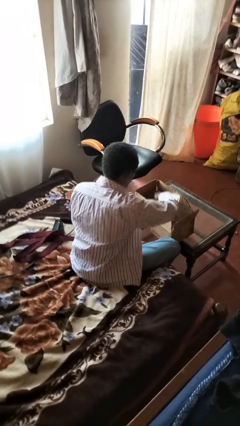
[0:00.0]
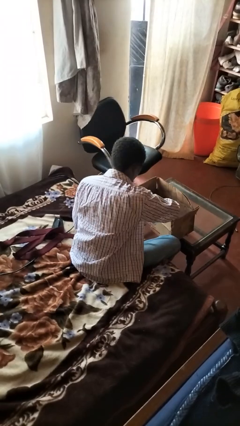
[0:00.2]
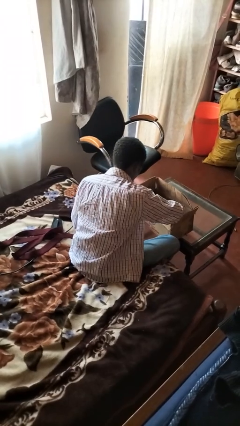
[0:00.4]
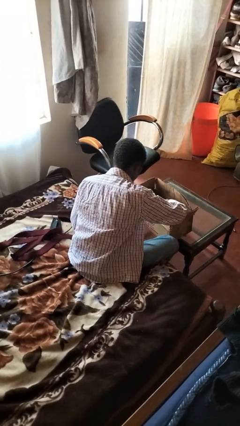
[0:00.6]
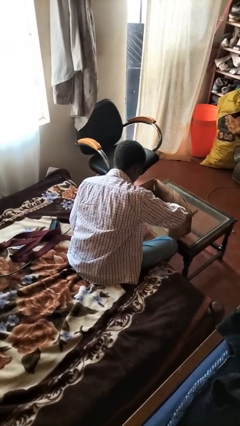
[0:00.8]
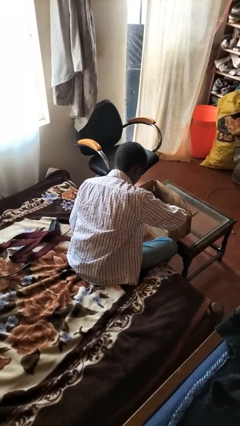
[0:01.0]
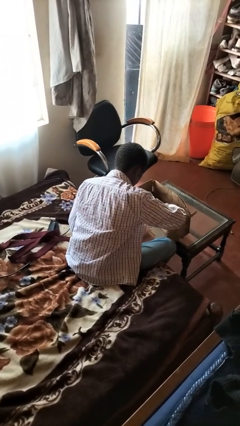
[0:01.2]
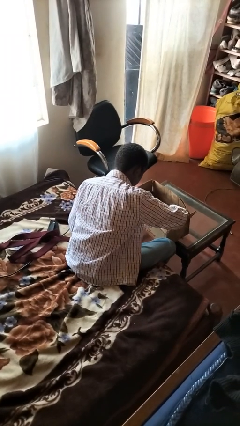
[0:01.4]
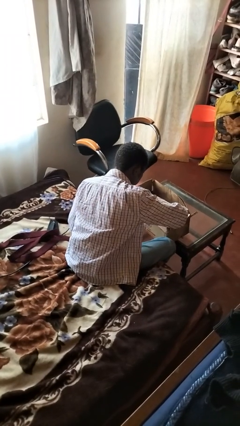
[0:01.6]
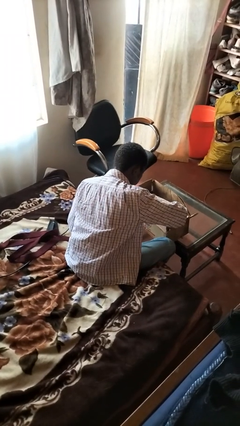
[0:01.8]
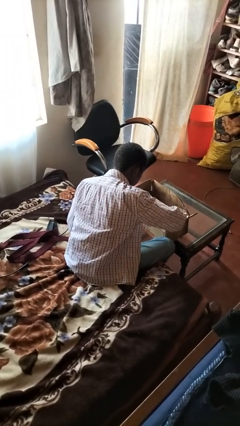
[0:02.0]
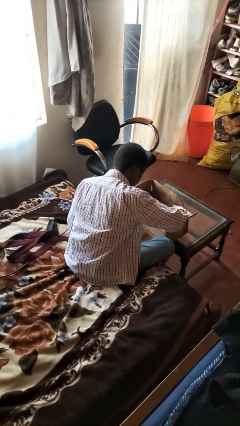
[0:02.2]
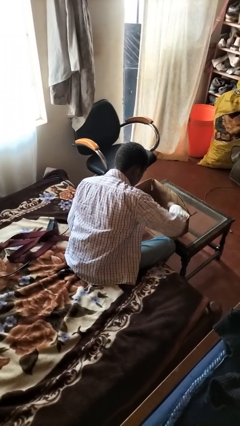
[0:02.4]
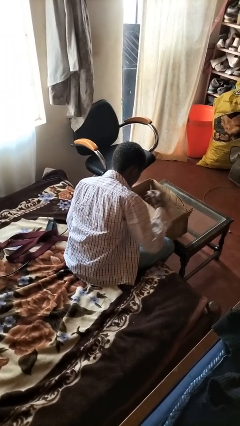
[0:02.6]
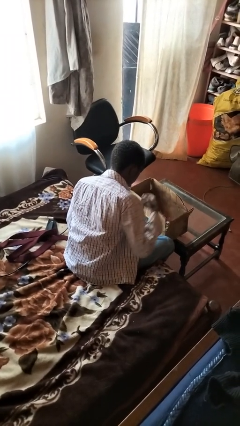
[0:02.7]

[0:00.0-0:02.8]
person searches in box

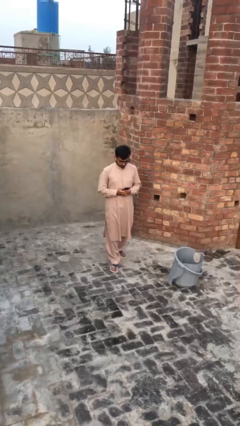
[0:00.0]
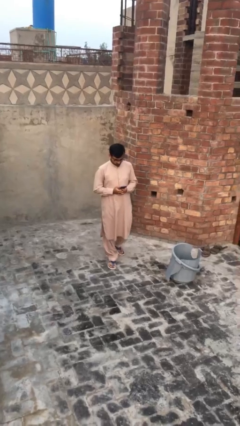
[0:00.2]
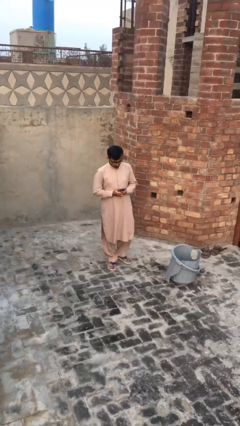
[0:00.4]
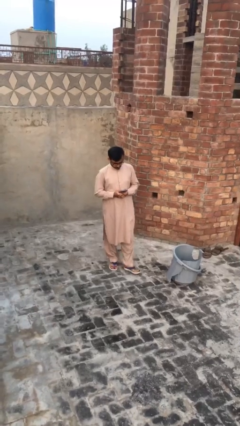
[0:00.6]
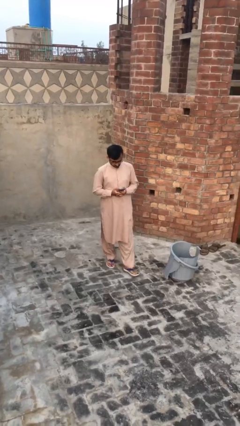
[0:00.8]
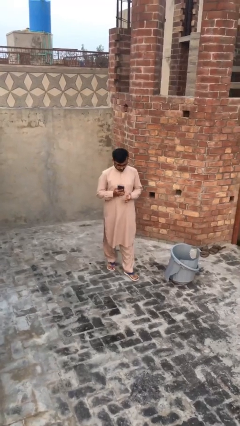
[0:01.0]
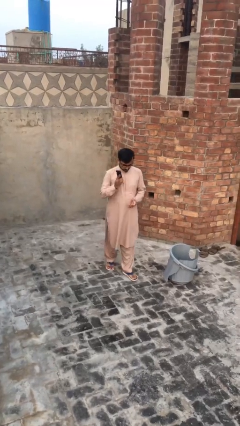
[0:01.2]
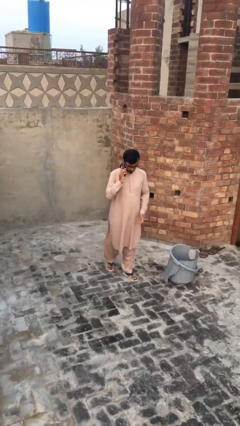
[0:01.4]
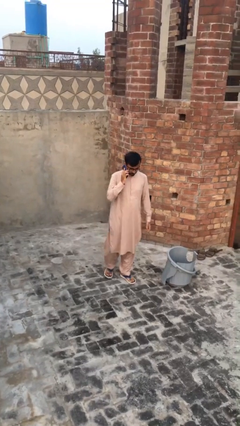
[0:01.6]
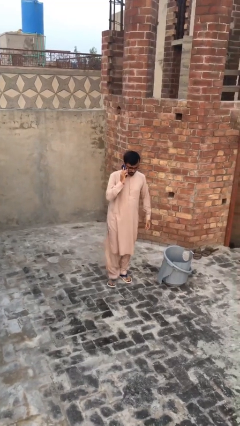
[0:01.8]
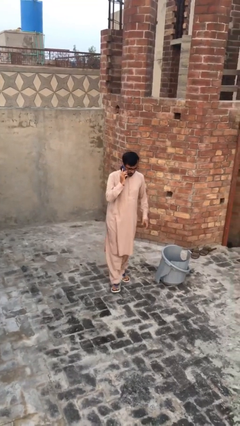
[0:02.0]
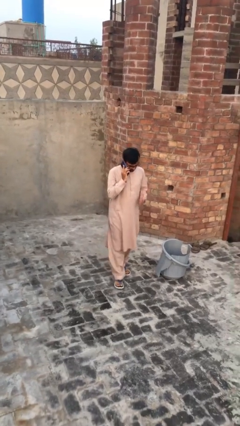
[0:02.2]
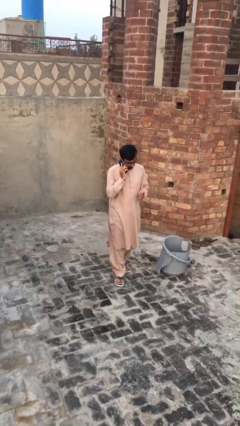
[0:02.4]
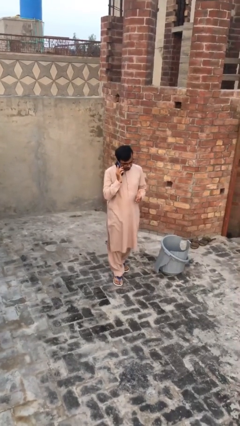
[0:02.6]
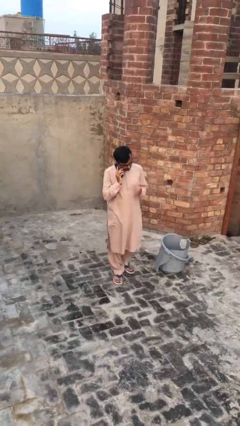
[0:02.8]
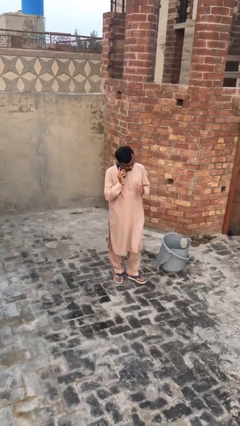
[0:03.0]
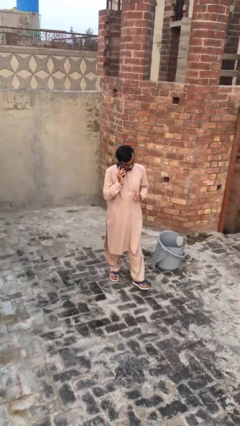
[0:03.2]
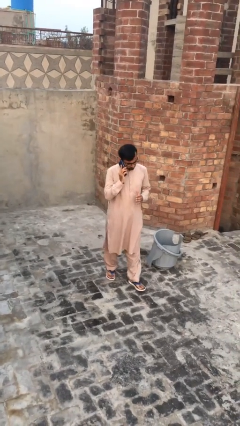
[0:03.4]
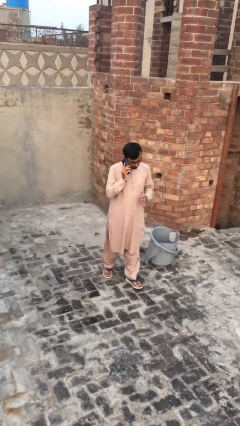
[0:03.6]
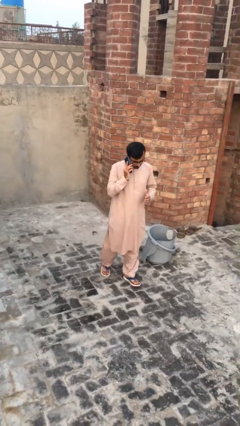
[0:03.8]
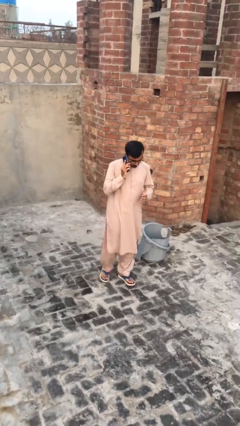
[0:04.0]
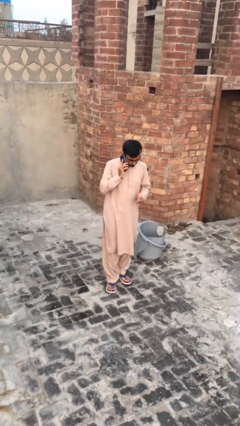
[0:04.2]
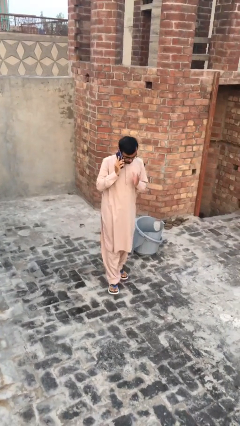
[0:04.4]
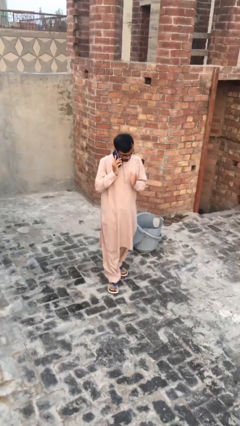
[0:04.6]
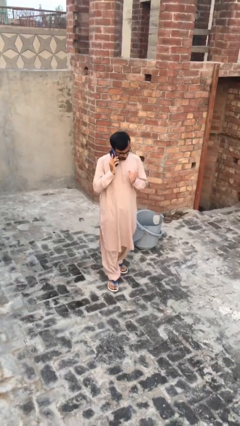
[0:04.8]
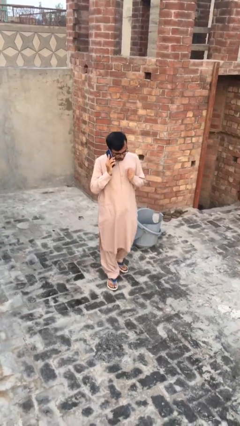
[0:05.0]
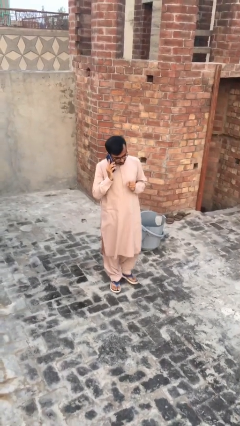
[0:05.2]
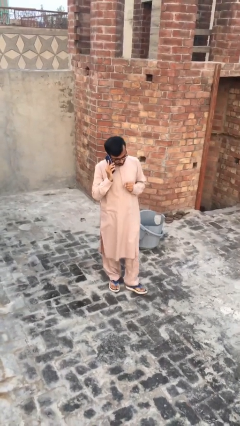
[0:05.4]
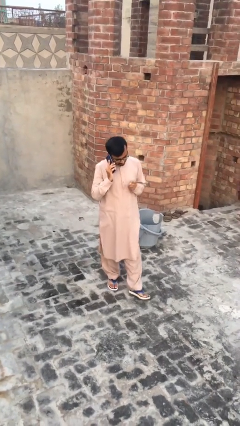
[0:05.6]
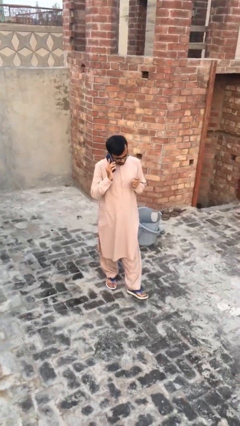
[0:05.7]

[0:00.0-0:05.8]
person talks on phone

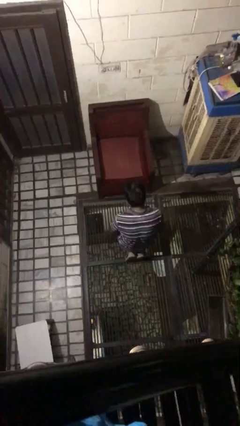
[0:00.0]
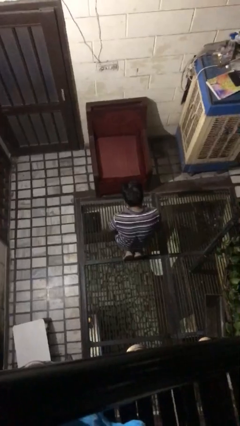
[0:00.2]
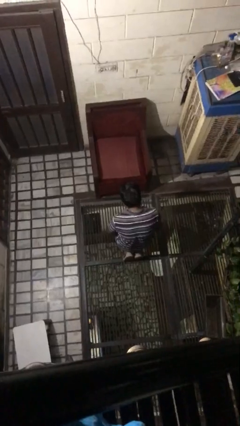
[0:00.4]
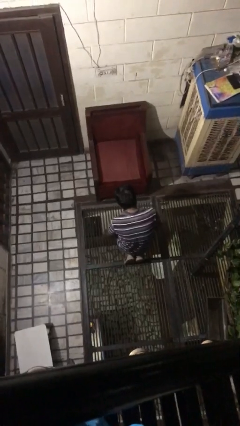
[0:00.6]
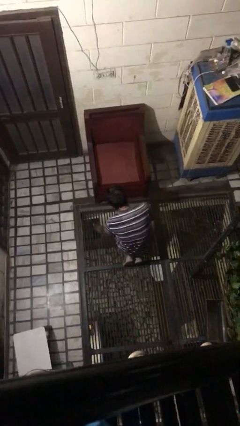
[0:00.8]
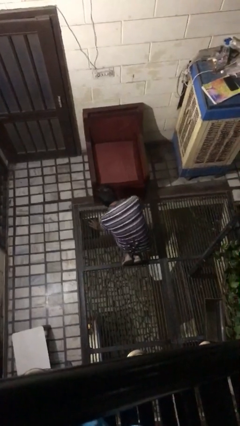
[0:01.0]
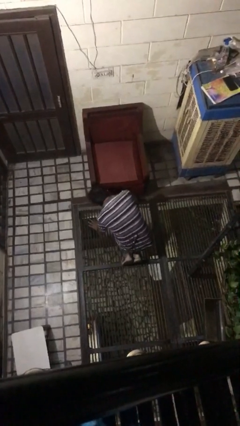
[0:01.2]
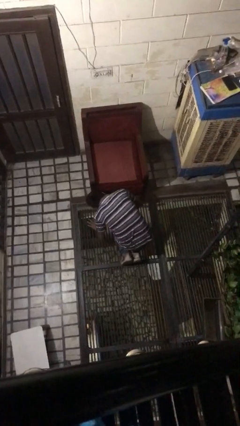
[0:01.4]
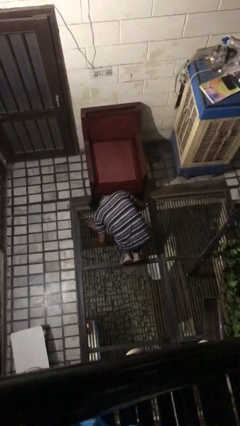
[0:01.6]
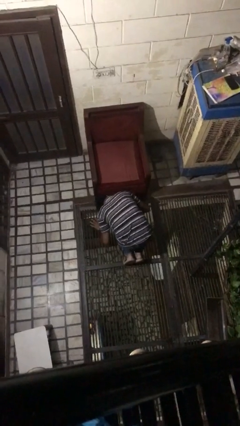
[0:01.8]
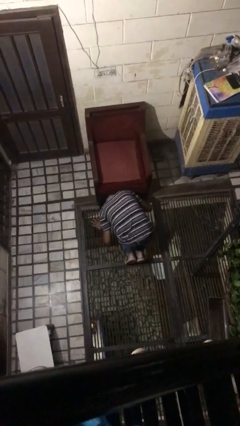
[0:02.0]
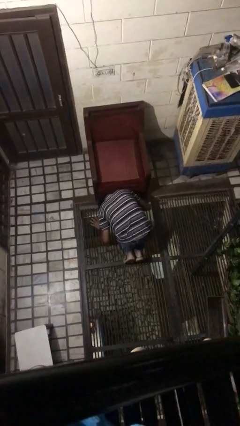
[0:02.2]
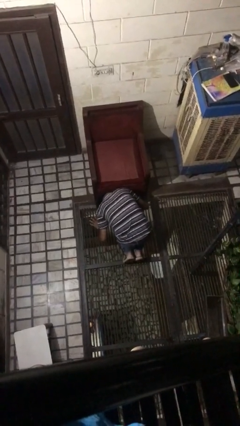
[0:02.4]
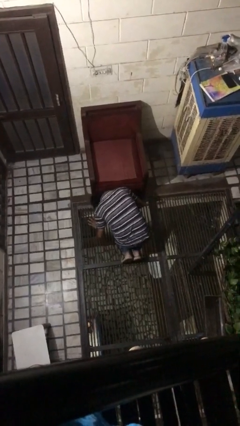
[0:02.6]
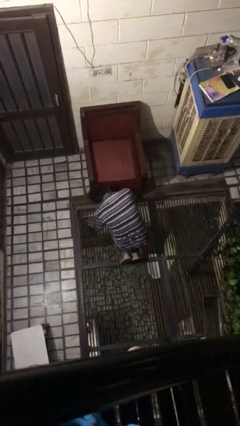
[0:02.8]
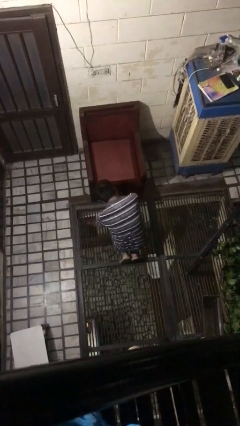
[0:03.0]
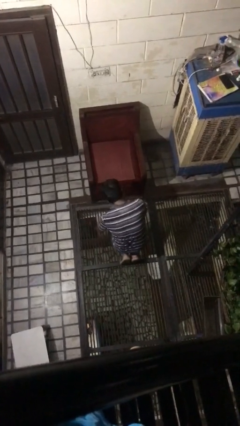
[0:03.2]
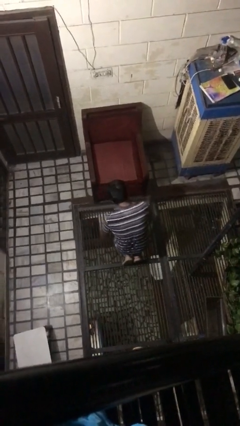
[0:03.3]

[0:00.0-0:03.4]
person searches under couch

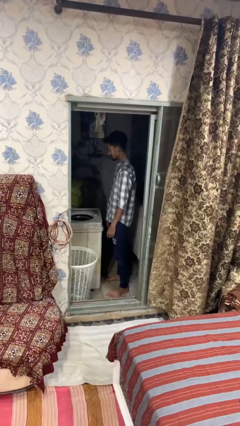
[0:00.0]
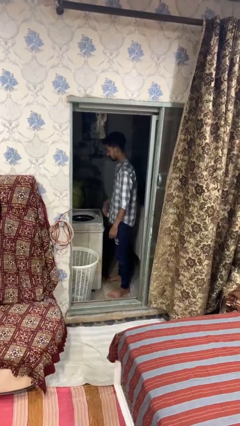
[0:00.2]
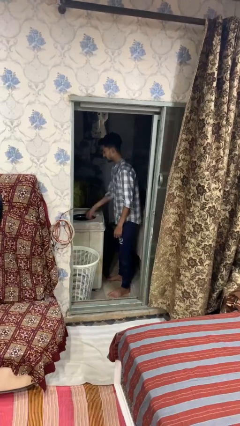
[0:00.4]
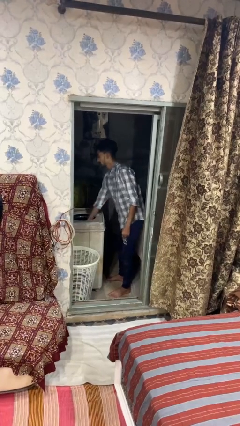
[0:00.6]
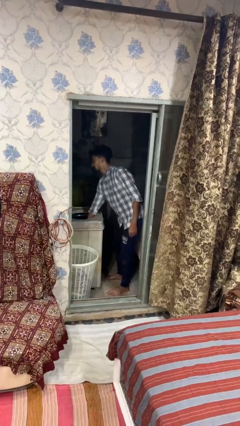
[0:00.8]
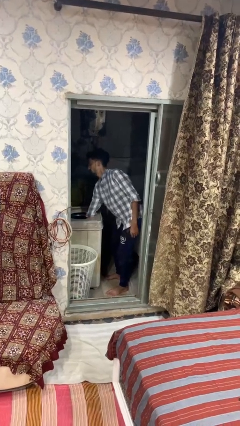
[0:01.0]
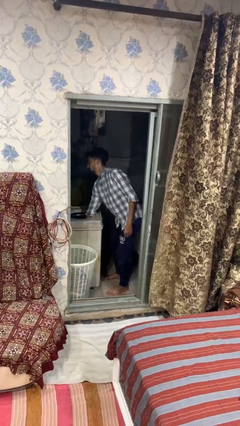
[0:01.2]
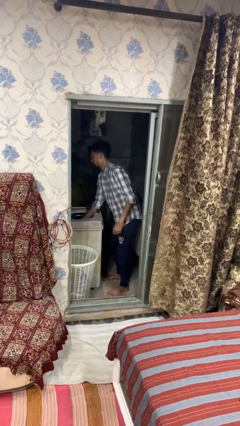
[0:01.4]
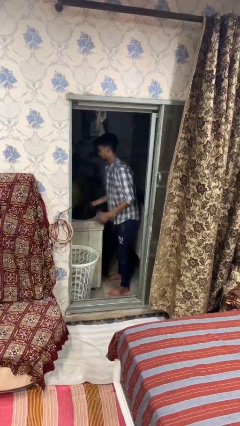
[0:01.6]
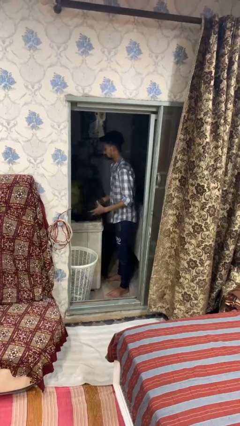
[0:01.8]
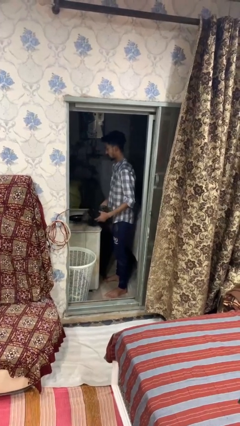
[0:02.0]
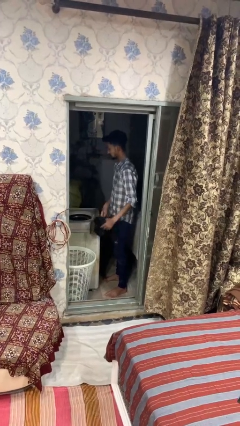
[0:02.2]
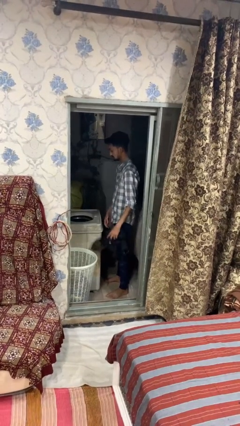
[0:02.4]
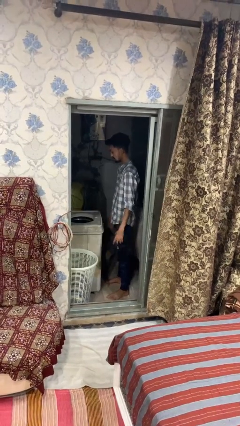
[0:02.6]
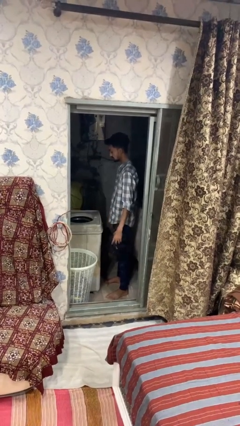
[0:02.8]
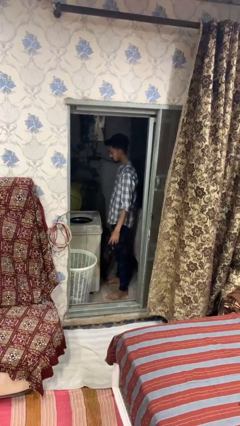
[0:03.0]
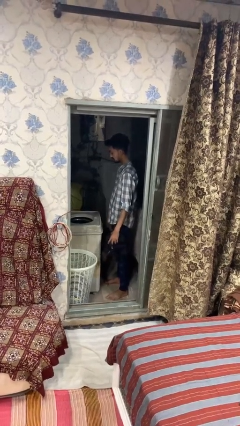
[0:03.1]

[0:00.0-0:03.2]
person unloads dryer

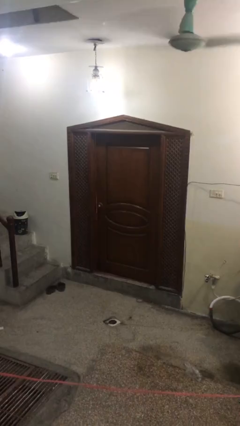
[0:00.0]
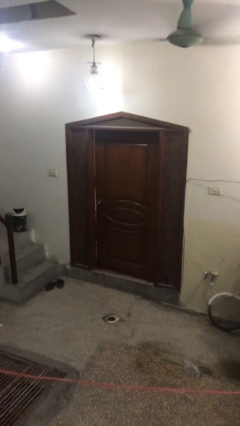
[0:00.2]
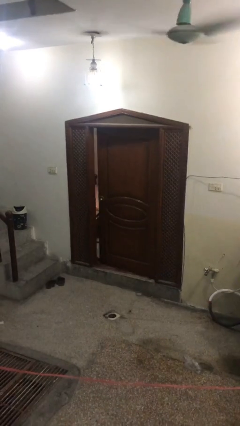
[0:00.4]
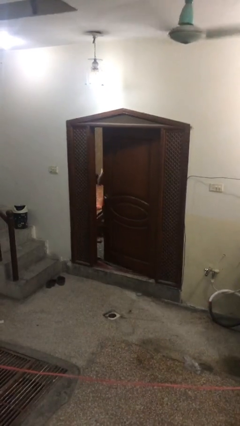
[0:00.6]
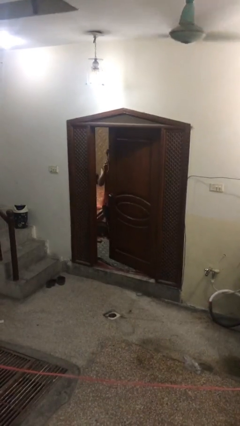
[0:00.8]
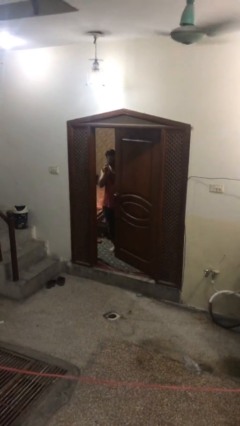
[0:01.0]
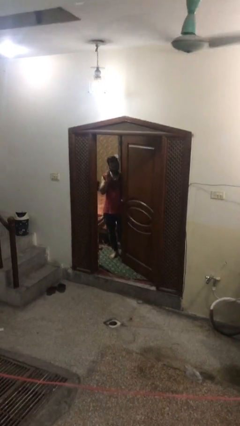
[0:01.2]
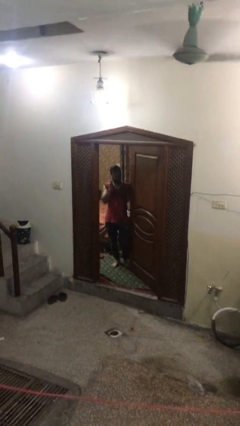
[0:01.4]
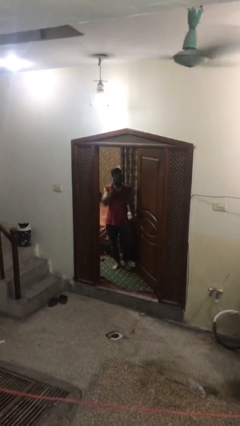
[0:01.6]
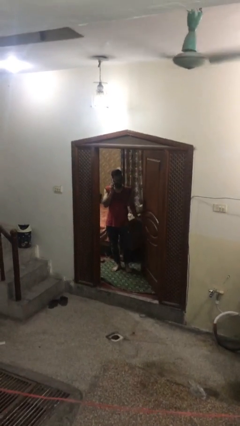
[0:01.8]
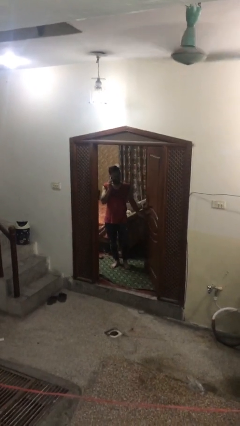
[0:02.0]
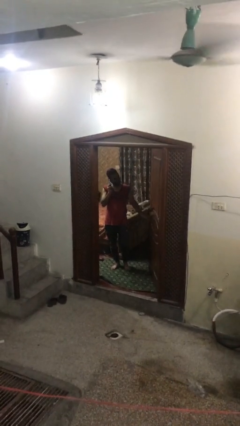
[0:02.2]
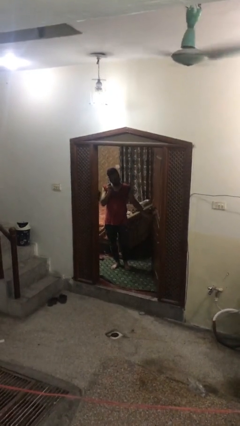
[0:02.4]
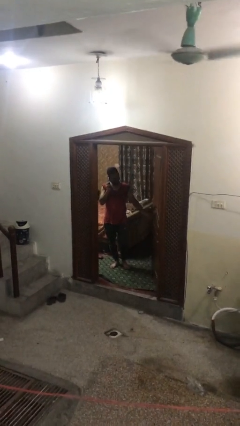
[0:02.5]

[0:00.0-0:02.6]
person opens facility door
